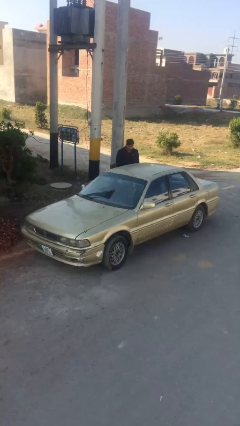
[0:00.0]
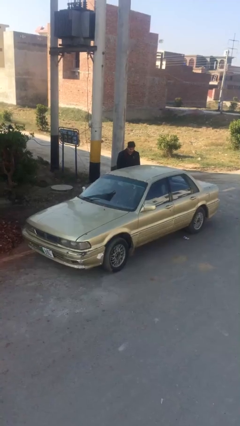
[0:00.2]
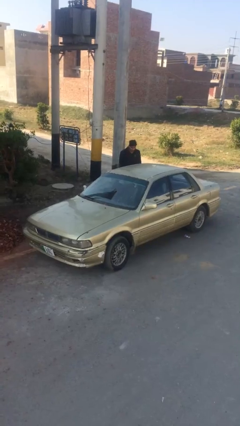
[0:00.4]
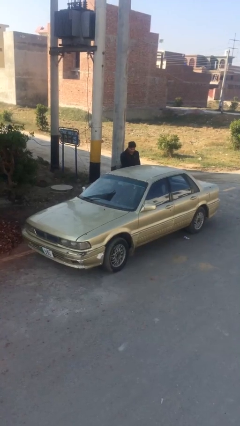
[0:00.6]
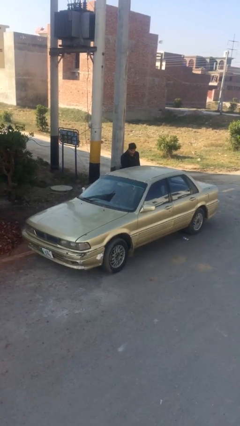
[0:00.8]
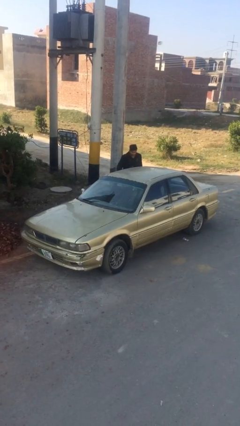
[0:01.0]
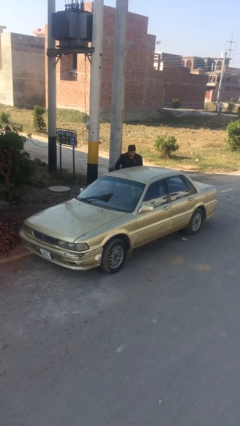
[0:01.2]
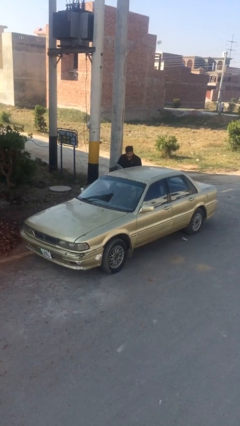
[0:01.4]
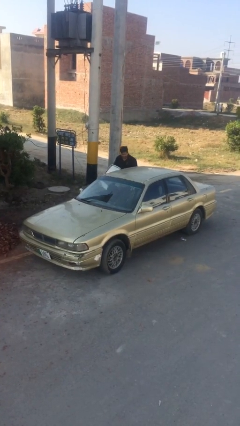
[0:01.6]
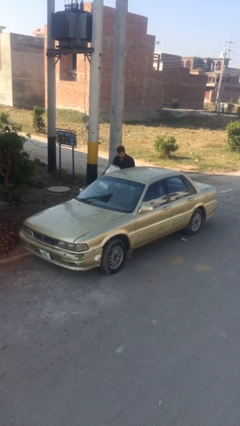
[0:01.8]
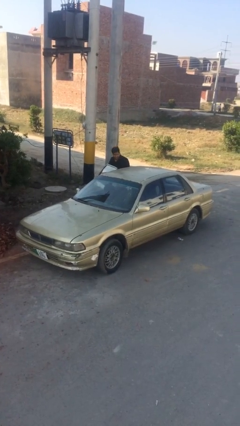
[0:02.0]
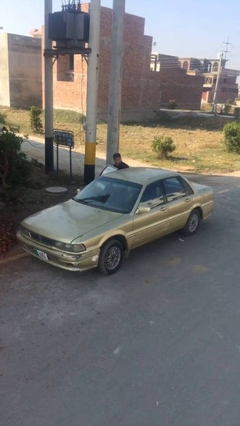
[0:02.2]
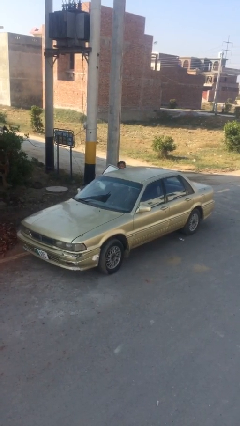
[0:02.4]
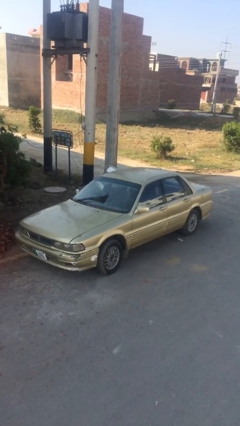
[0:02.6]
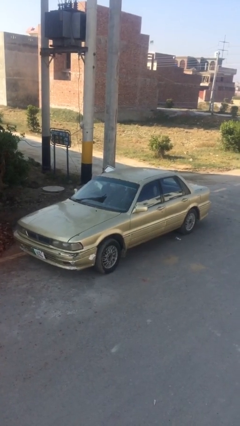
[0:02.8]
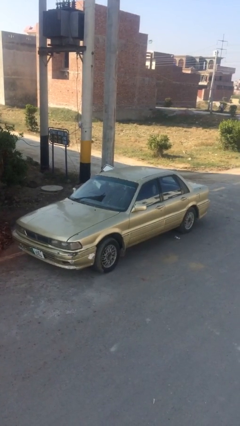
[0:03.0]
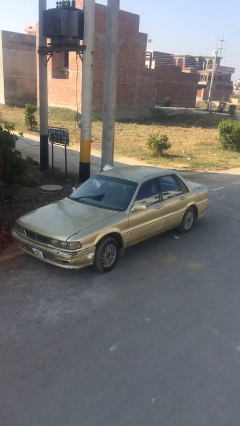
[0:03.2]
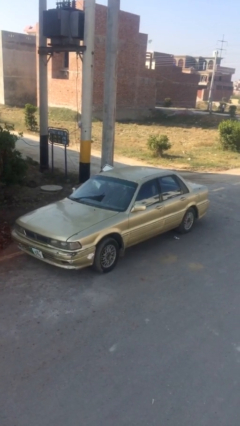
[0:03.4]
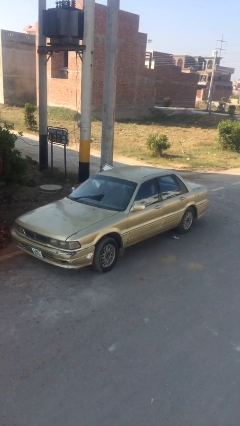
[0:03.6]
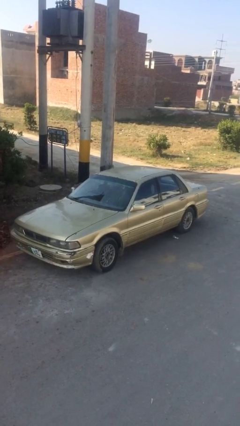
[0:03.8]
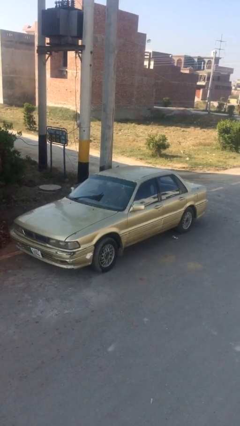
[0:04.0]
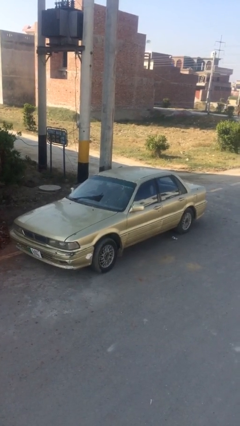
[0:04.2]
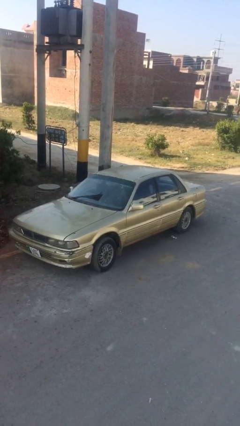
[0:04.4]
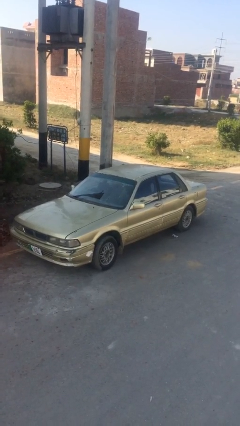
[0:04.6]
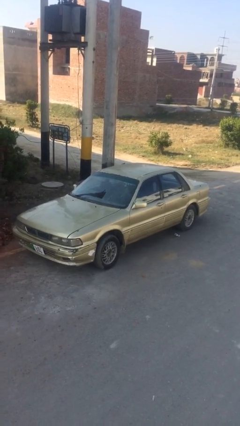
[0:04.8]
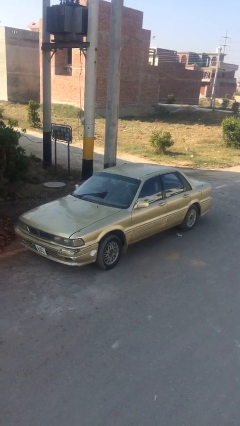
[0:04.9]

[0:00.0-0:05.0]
car picks up person

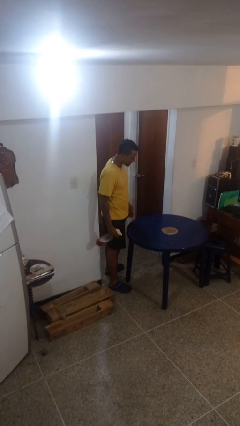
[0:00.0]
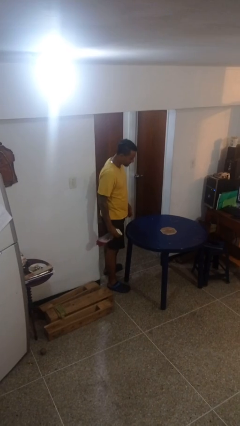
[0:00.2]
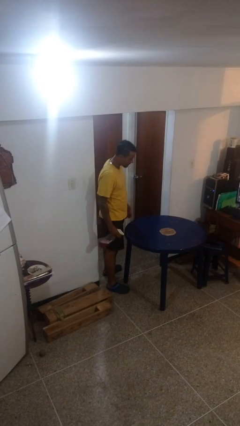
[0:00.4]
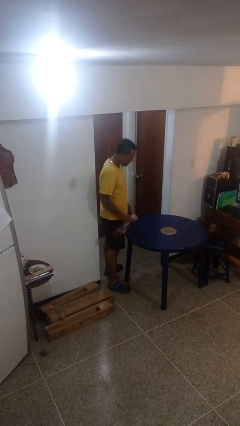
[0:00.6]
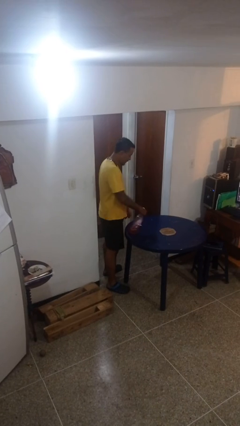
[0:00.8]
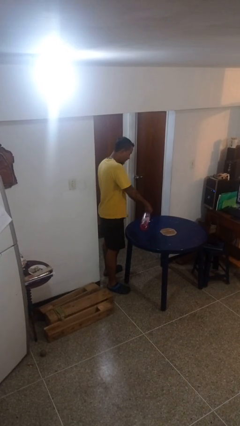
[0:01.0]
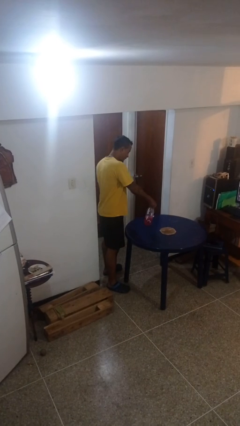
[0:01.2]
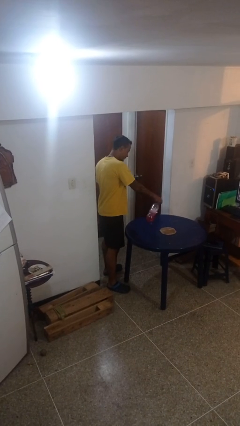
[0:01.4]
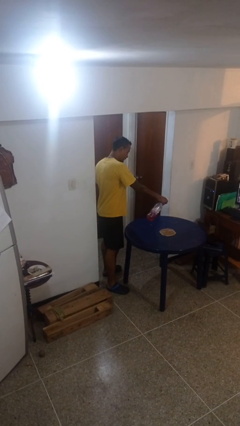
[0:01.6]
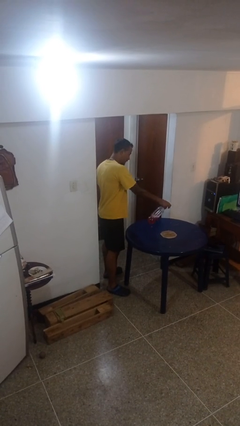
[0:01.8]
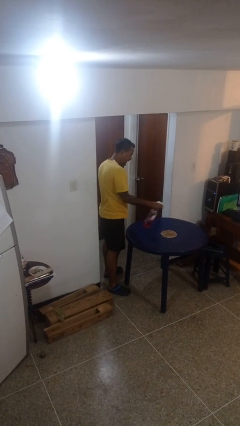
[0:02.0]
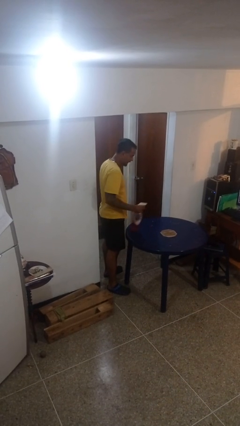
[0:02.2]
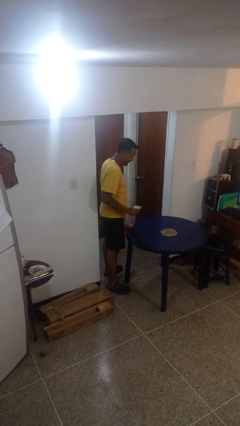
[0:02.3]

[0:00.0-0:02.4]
person sprays from bottle

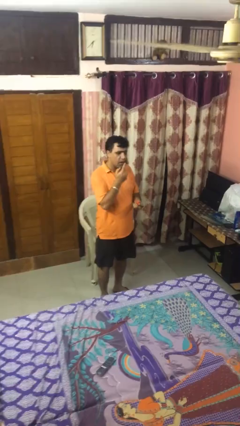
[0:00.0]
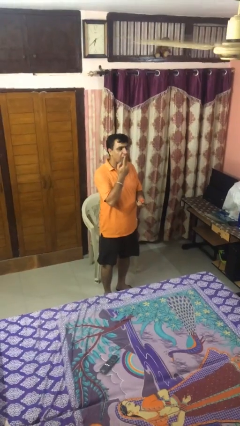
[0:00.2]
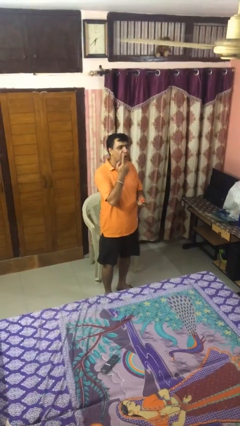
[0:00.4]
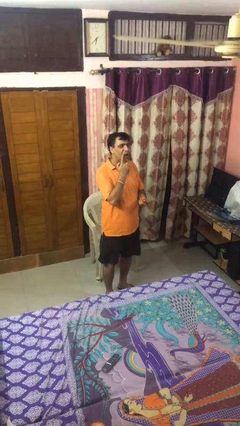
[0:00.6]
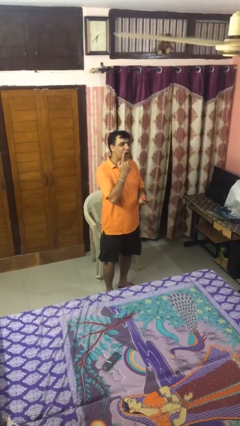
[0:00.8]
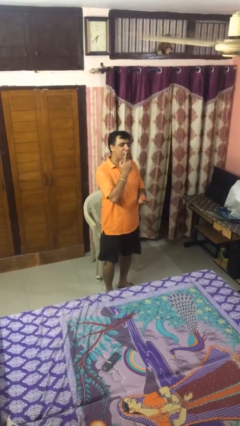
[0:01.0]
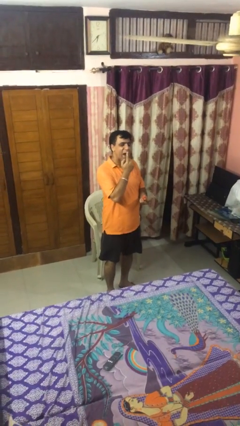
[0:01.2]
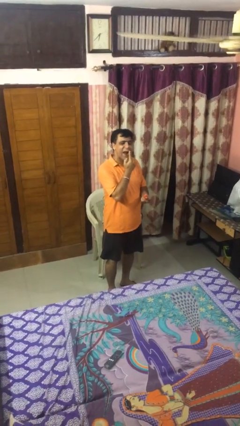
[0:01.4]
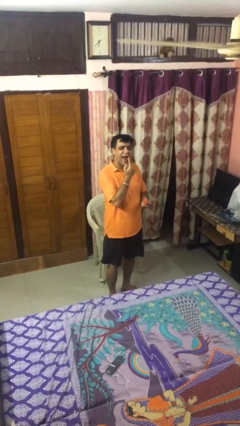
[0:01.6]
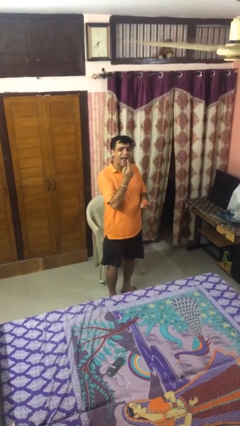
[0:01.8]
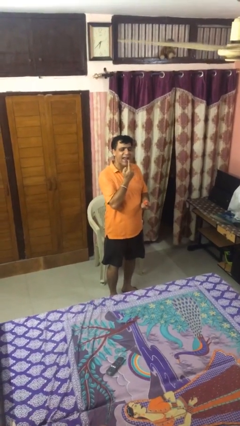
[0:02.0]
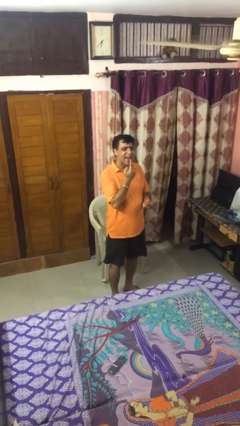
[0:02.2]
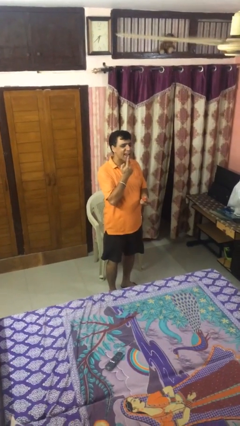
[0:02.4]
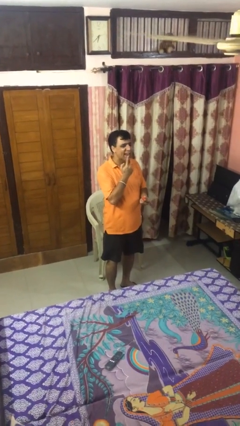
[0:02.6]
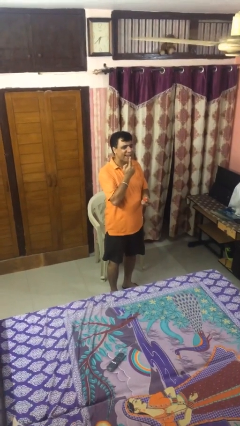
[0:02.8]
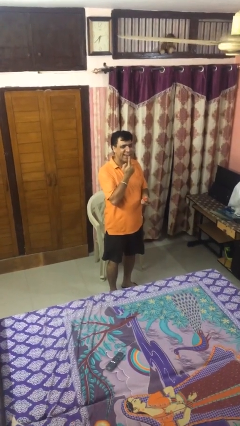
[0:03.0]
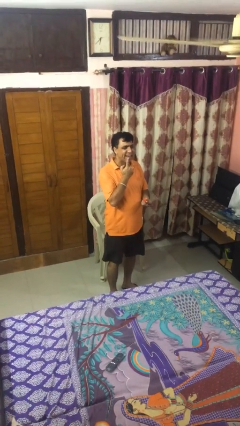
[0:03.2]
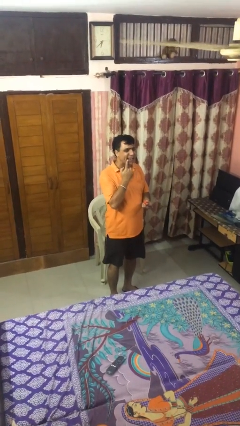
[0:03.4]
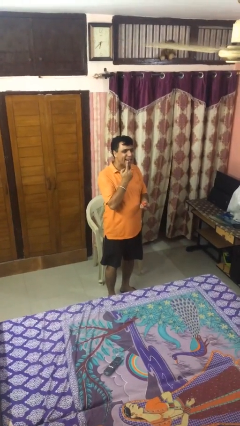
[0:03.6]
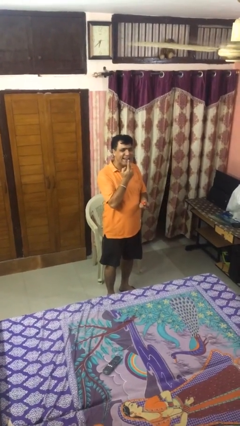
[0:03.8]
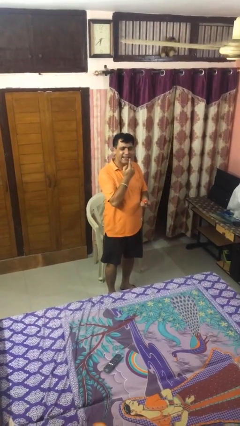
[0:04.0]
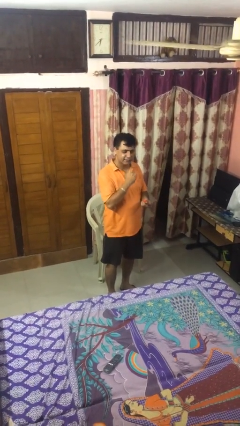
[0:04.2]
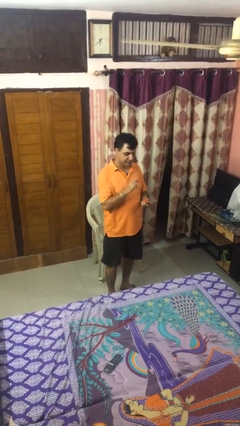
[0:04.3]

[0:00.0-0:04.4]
person applies lip makeup

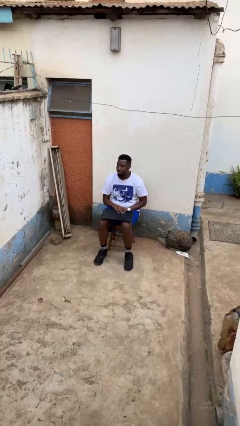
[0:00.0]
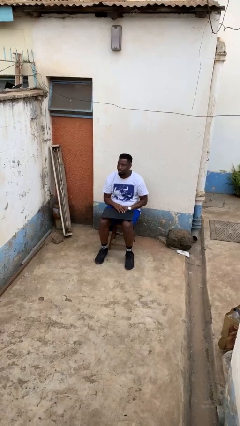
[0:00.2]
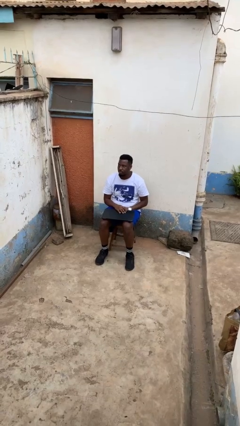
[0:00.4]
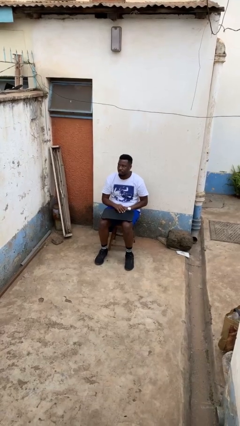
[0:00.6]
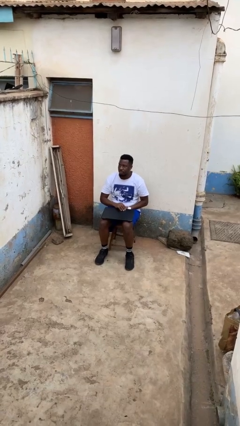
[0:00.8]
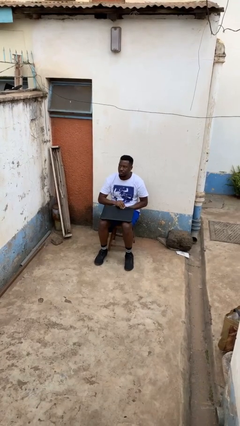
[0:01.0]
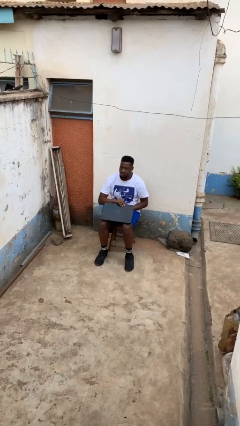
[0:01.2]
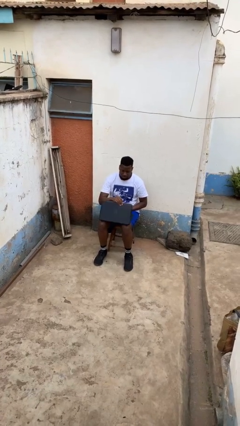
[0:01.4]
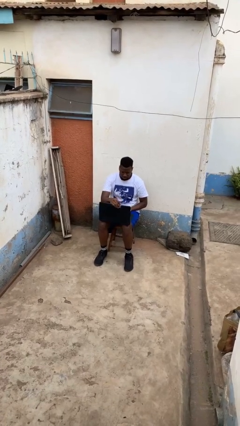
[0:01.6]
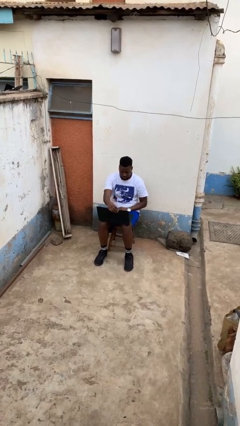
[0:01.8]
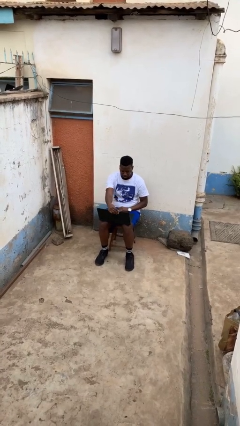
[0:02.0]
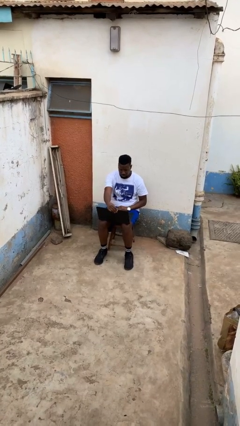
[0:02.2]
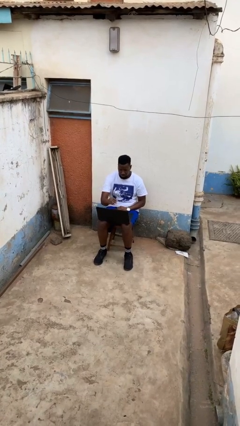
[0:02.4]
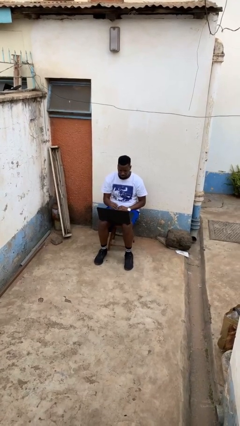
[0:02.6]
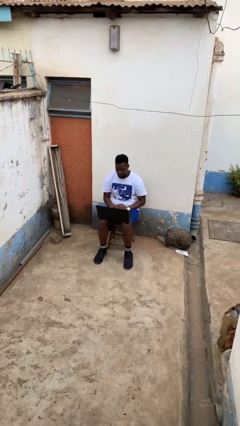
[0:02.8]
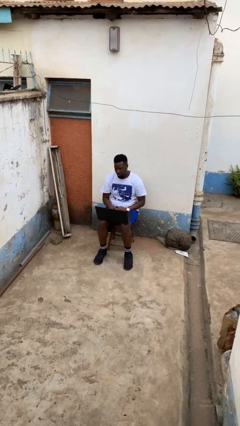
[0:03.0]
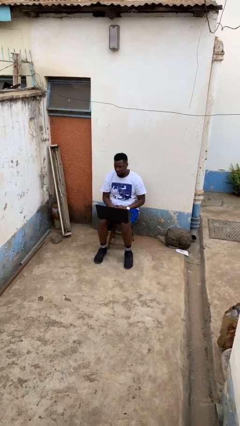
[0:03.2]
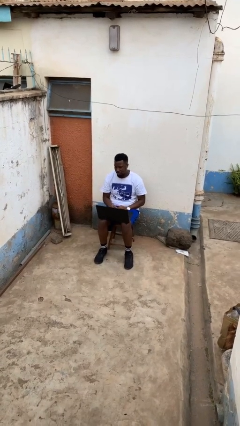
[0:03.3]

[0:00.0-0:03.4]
person opens laptop

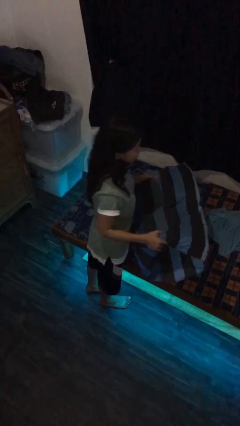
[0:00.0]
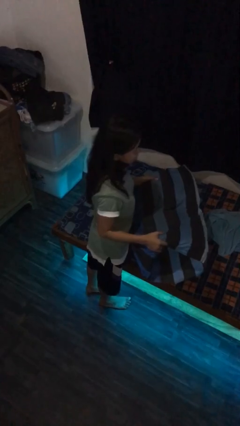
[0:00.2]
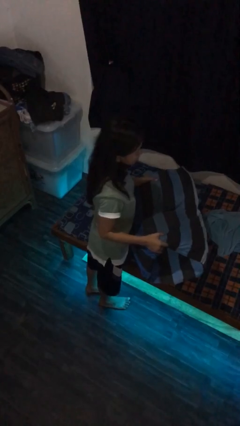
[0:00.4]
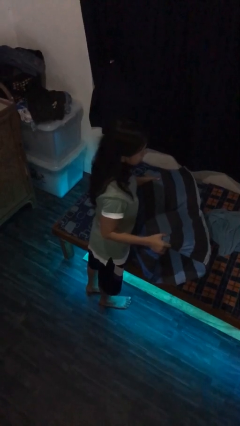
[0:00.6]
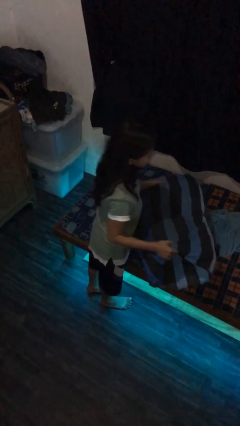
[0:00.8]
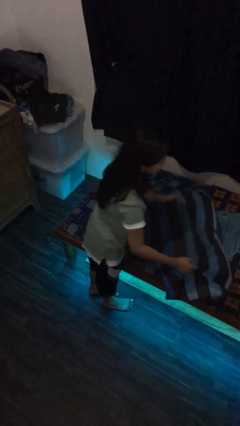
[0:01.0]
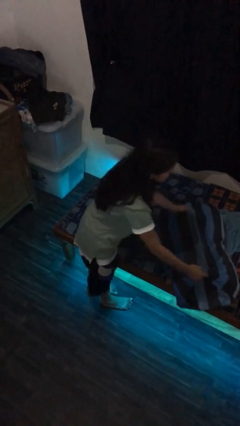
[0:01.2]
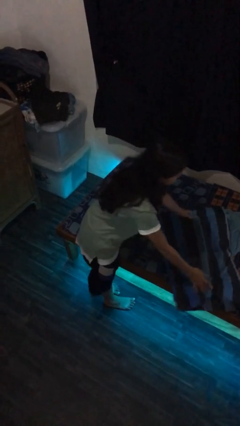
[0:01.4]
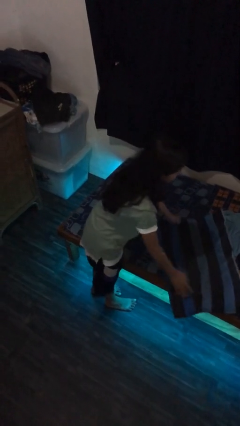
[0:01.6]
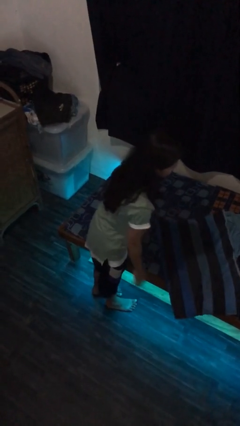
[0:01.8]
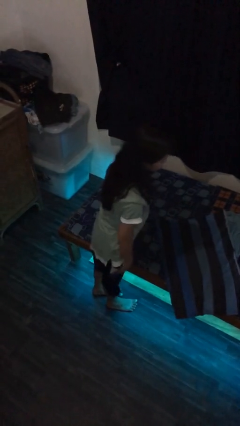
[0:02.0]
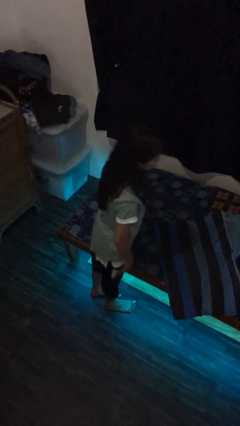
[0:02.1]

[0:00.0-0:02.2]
person puts down object on bed
